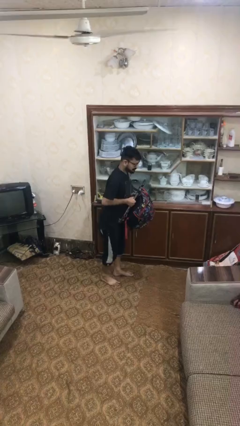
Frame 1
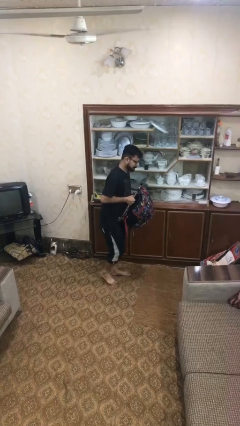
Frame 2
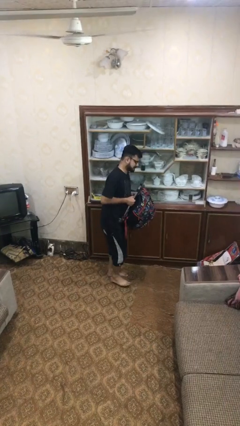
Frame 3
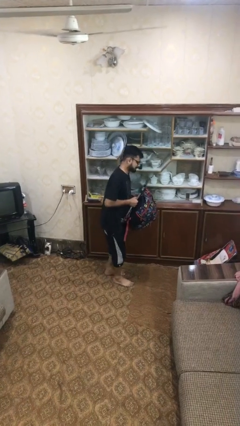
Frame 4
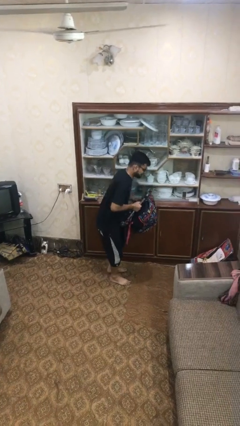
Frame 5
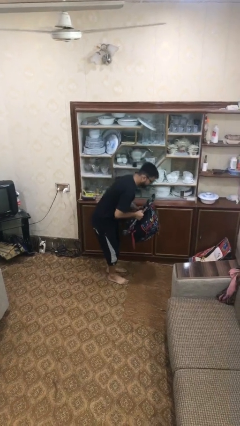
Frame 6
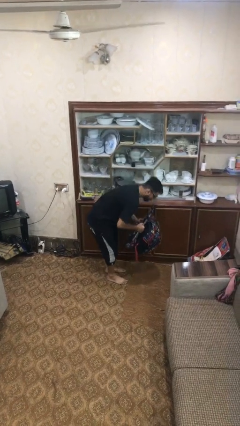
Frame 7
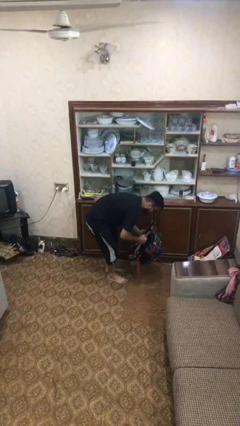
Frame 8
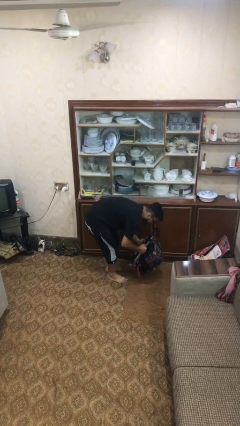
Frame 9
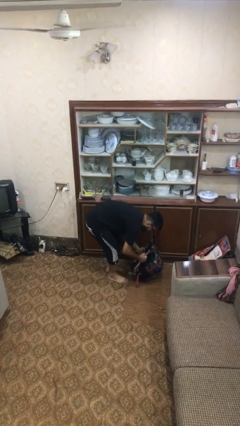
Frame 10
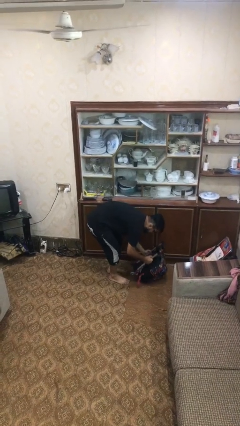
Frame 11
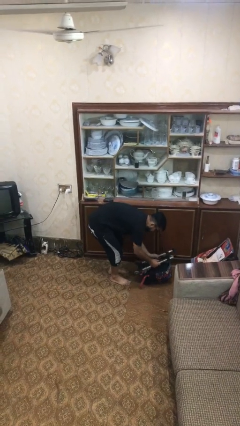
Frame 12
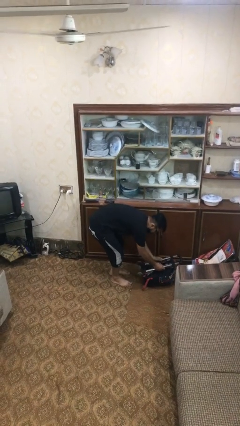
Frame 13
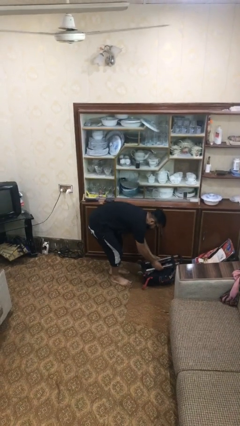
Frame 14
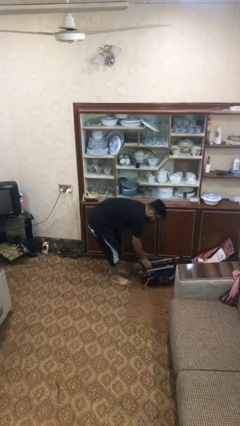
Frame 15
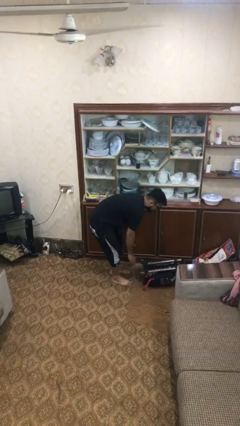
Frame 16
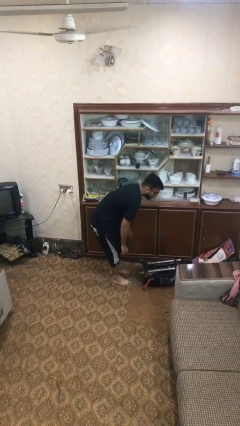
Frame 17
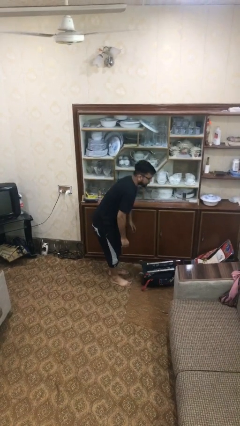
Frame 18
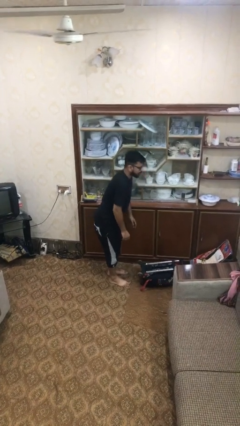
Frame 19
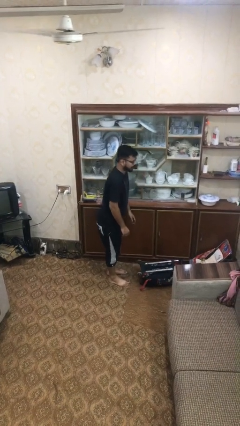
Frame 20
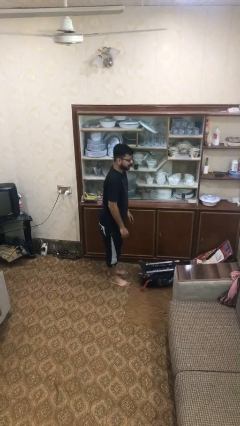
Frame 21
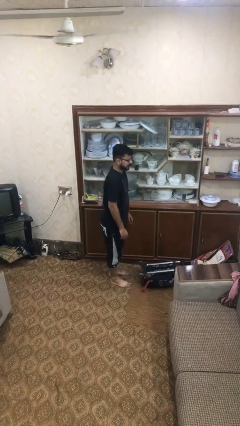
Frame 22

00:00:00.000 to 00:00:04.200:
person puts down object on floor

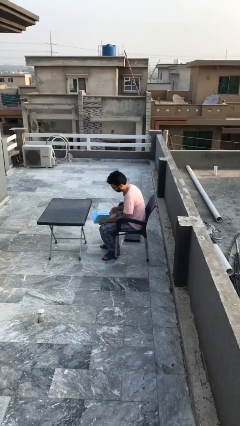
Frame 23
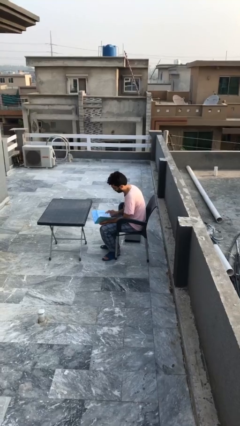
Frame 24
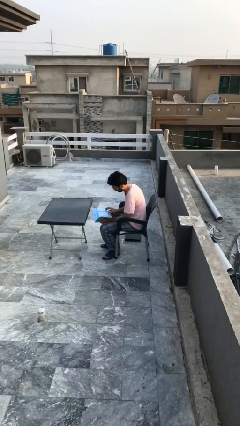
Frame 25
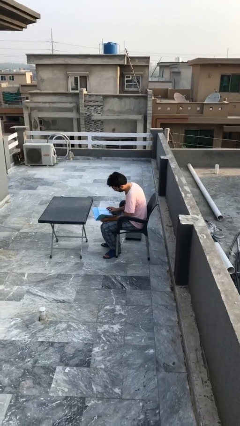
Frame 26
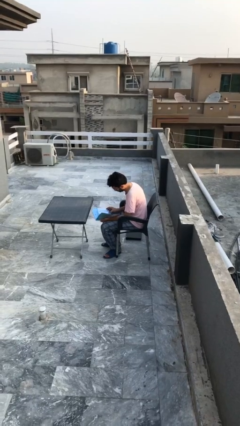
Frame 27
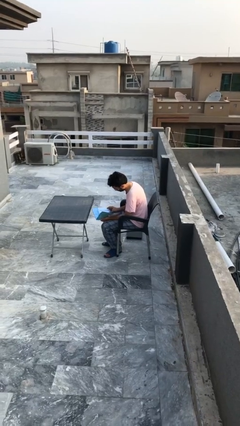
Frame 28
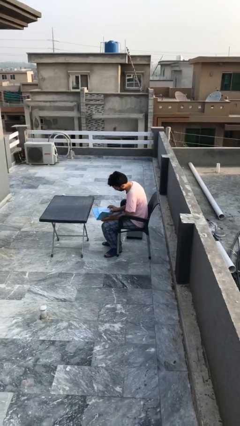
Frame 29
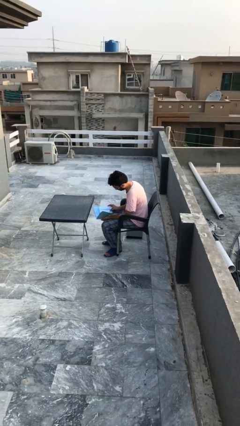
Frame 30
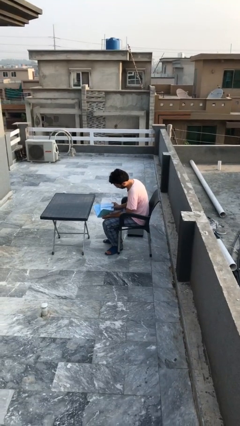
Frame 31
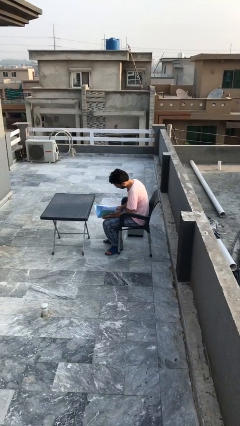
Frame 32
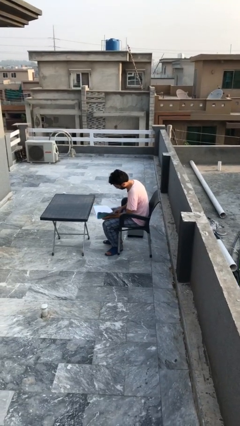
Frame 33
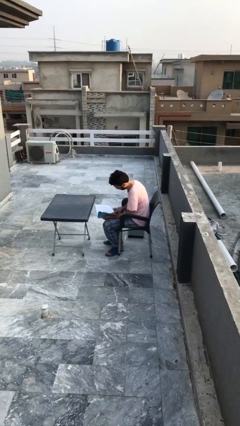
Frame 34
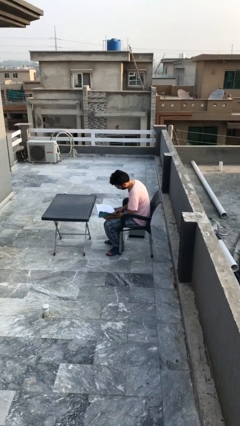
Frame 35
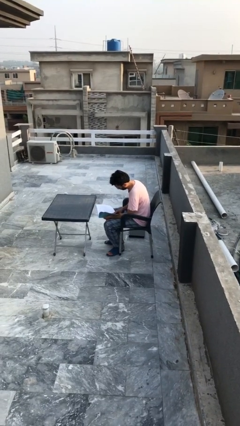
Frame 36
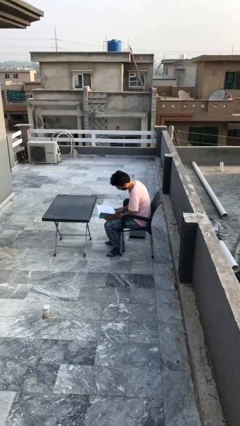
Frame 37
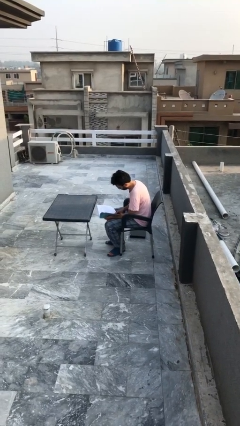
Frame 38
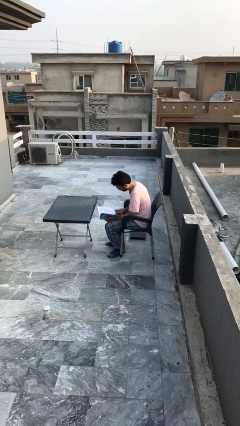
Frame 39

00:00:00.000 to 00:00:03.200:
person reads document

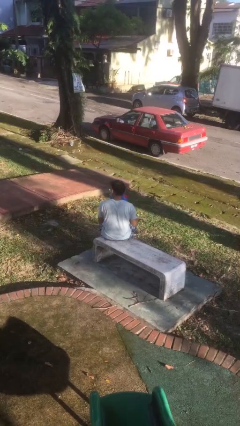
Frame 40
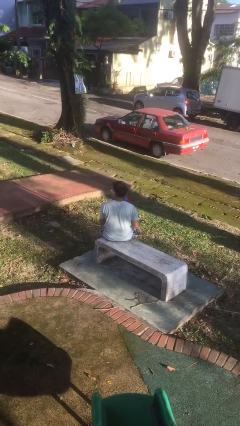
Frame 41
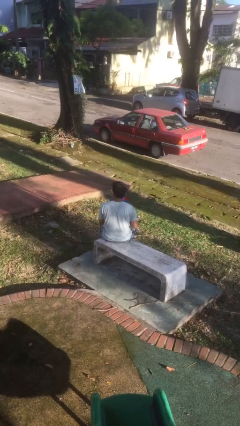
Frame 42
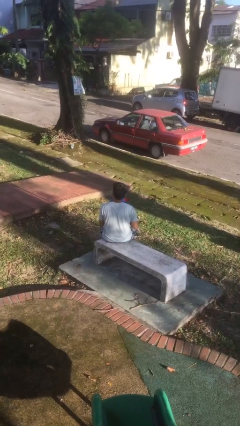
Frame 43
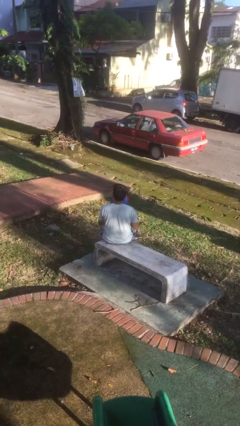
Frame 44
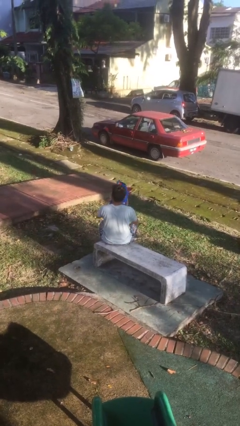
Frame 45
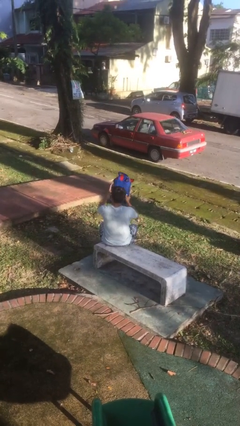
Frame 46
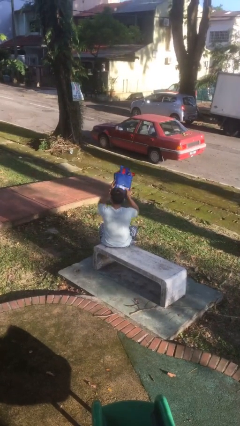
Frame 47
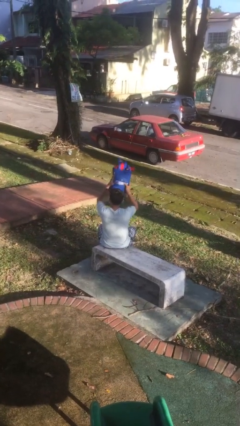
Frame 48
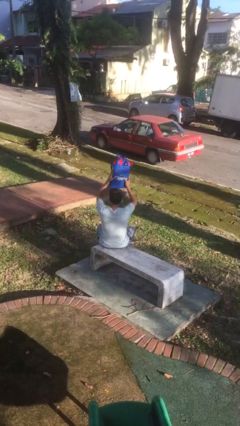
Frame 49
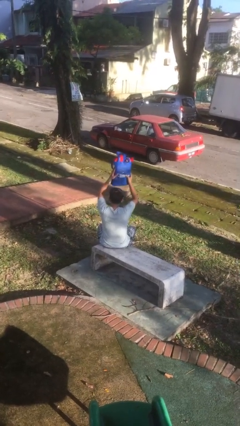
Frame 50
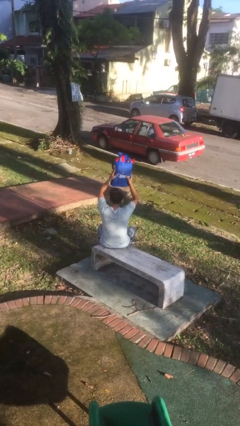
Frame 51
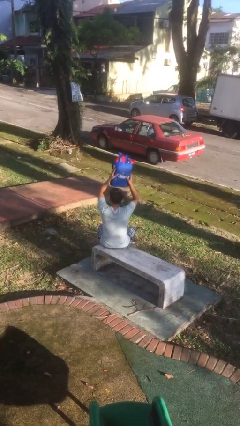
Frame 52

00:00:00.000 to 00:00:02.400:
person holds object above head

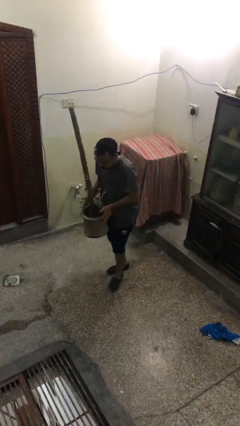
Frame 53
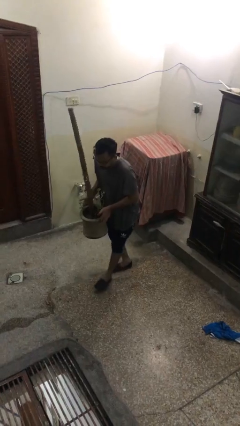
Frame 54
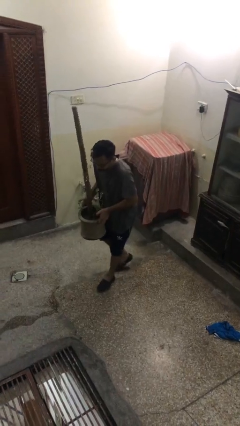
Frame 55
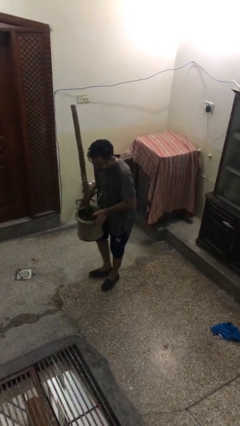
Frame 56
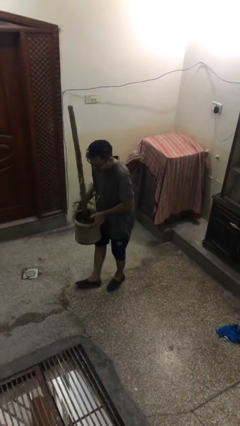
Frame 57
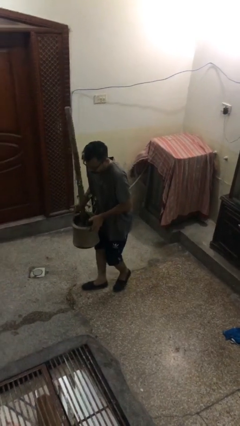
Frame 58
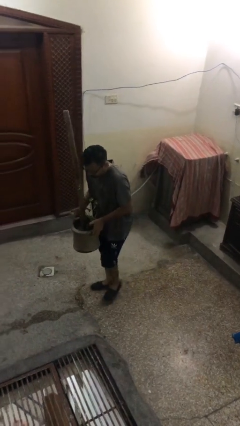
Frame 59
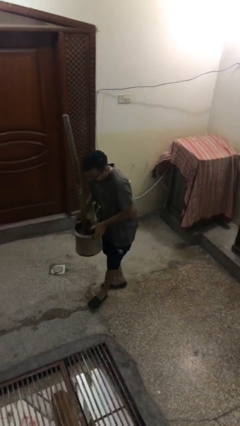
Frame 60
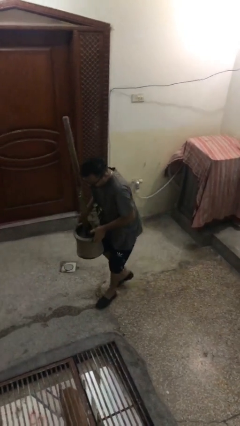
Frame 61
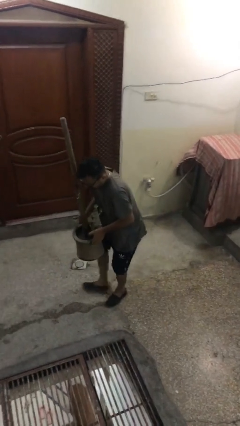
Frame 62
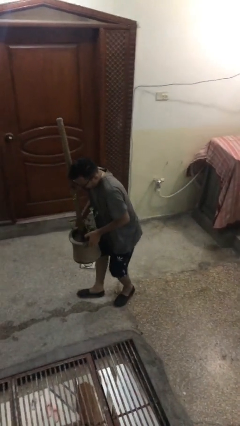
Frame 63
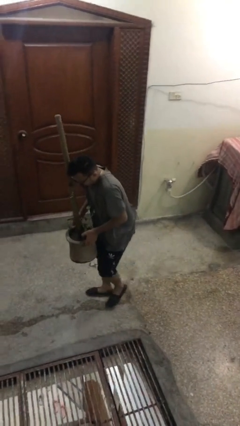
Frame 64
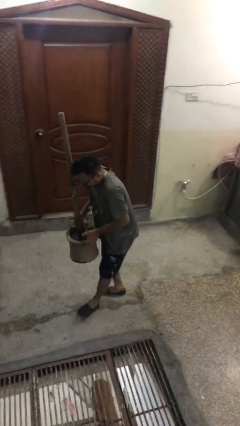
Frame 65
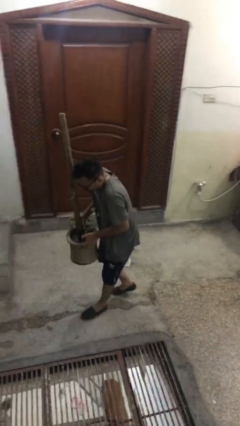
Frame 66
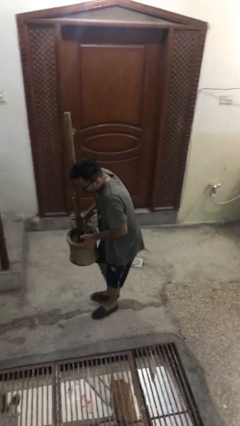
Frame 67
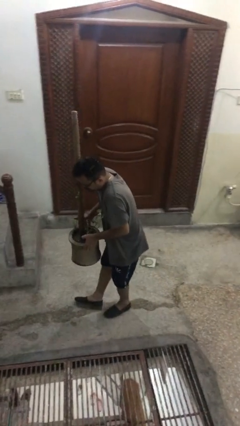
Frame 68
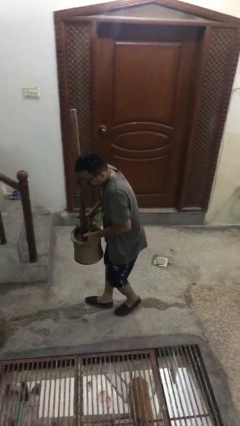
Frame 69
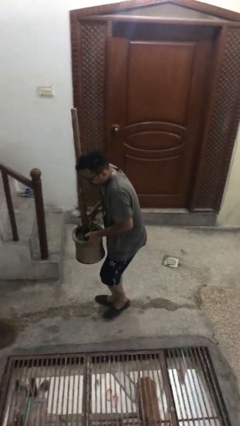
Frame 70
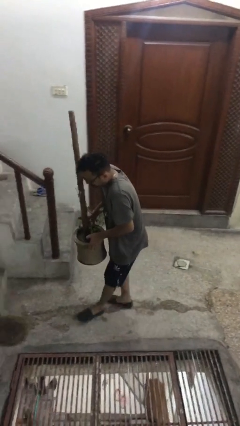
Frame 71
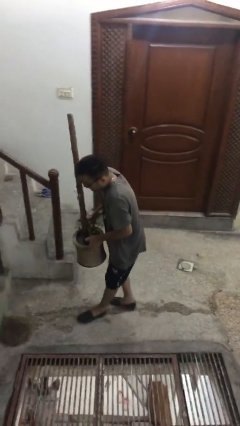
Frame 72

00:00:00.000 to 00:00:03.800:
person carries heavy object

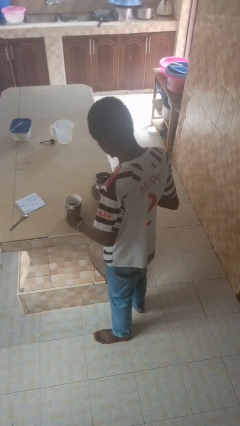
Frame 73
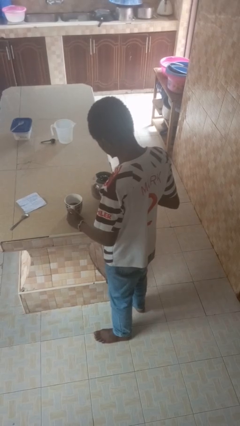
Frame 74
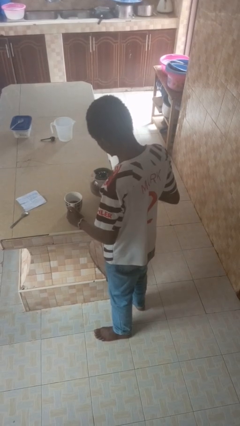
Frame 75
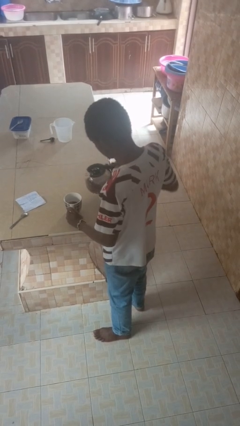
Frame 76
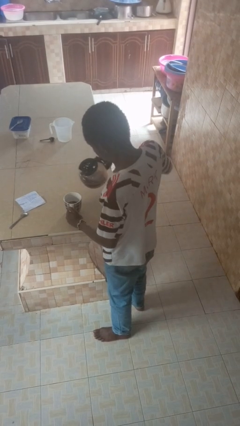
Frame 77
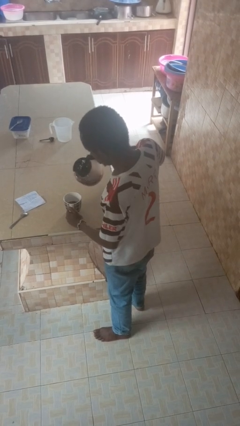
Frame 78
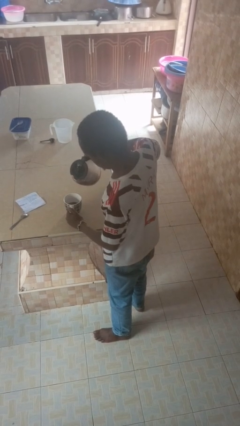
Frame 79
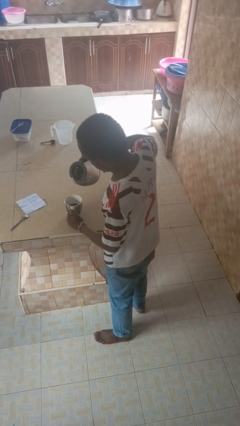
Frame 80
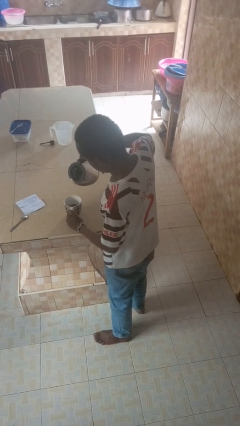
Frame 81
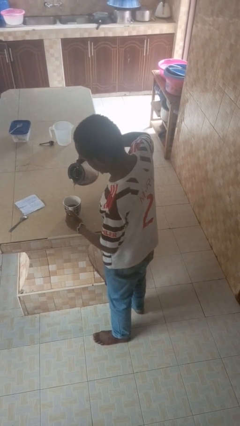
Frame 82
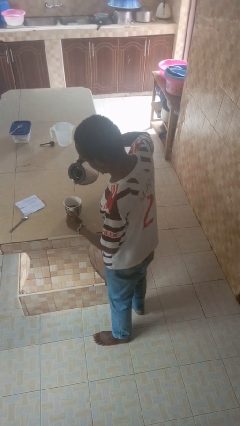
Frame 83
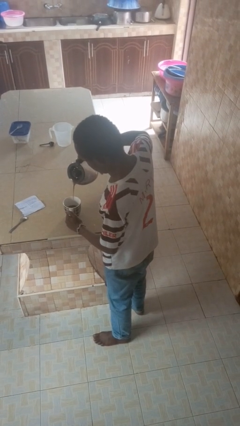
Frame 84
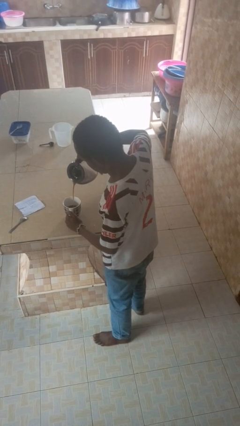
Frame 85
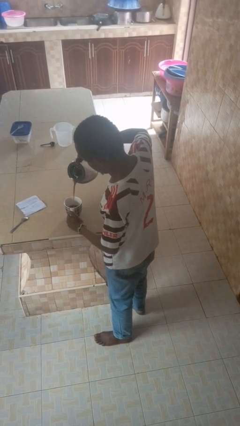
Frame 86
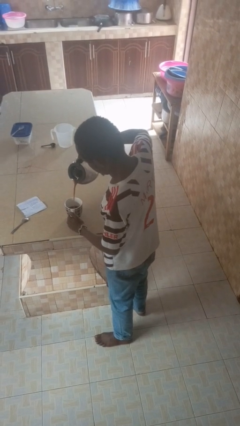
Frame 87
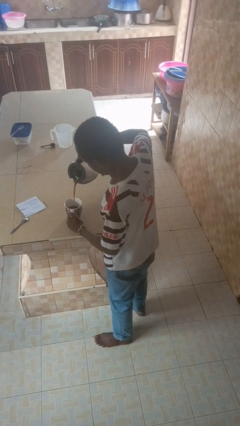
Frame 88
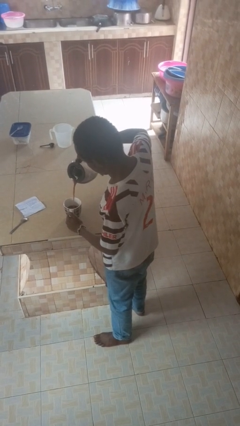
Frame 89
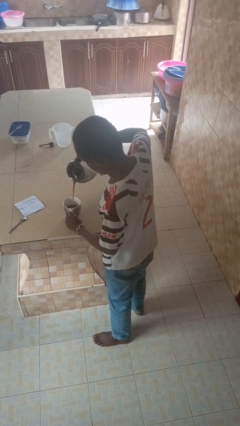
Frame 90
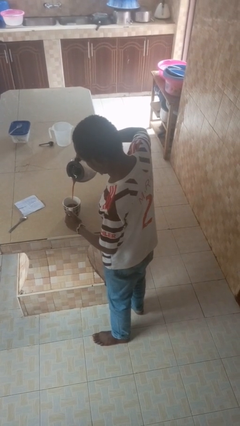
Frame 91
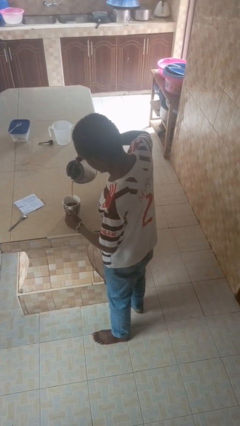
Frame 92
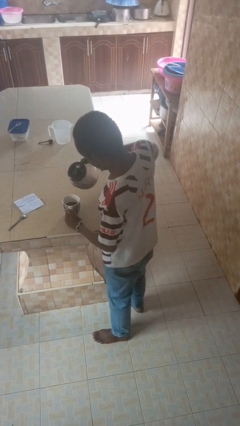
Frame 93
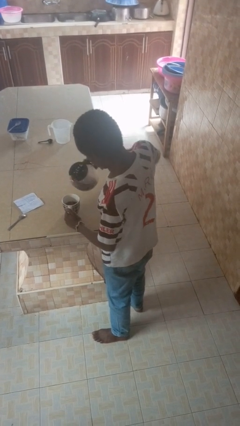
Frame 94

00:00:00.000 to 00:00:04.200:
person pours coffee into mug
